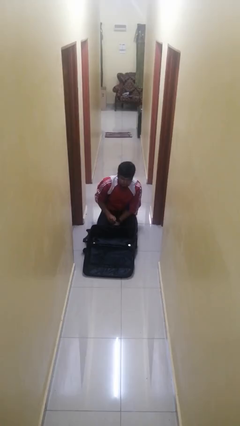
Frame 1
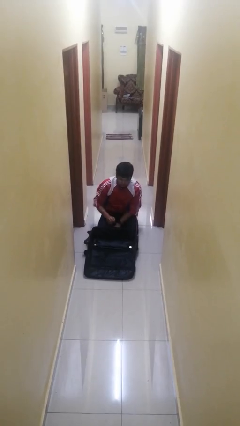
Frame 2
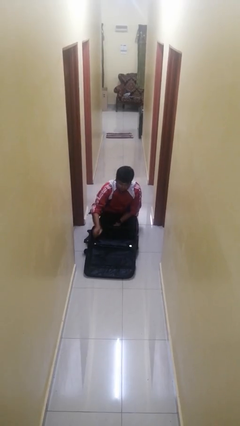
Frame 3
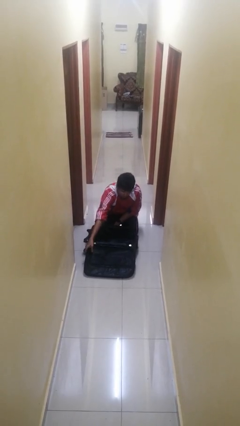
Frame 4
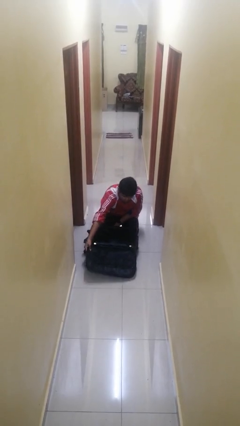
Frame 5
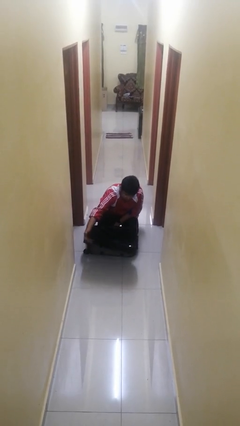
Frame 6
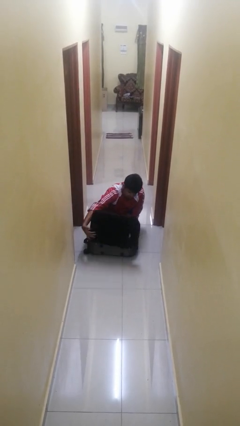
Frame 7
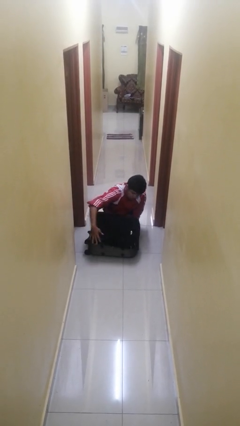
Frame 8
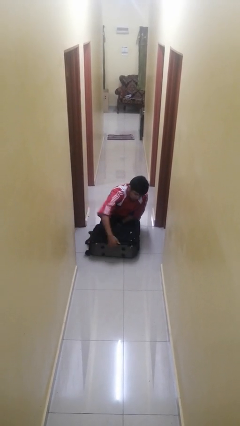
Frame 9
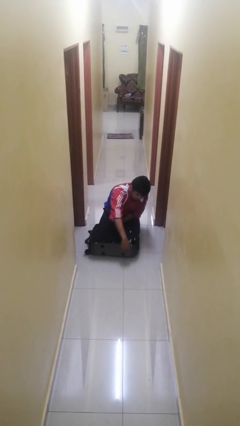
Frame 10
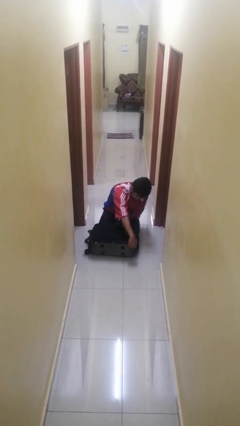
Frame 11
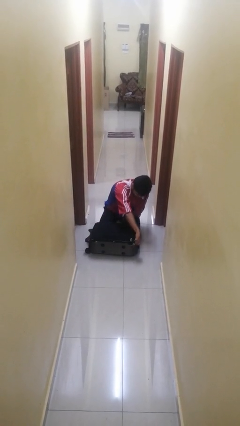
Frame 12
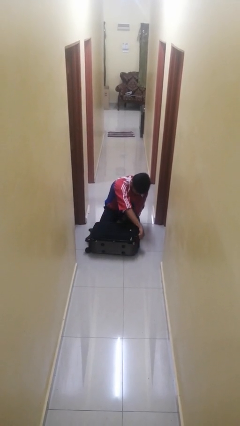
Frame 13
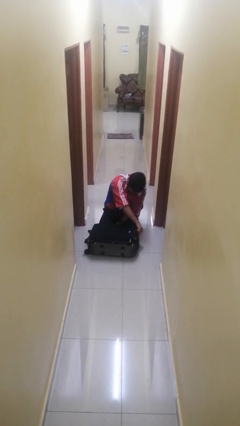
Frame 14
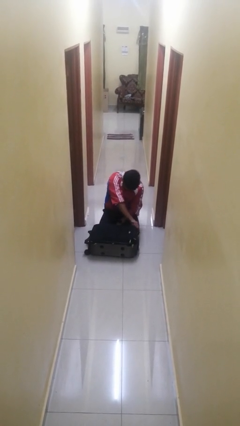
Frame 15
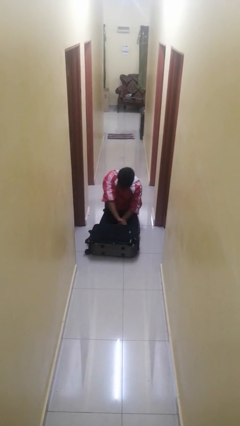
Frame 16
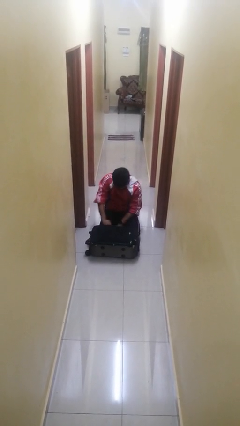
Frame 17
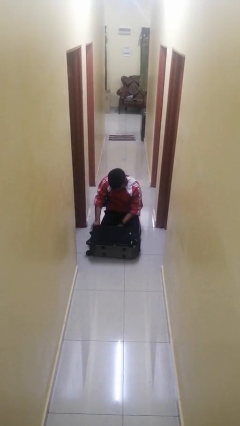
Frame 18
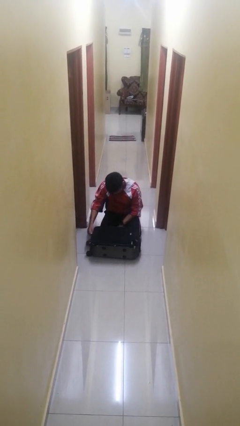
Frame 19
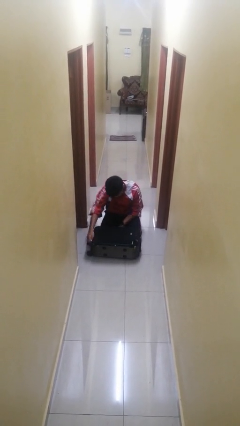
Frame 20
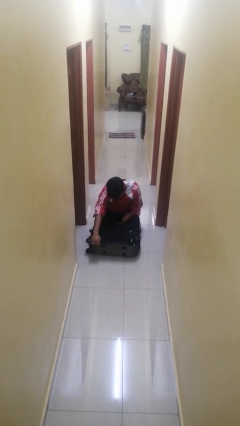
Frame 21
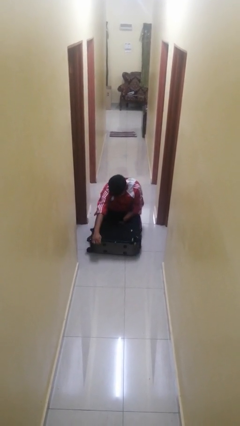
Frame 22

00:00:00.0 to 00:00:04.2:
person closes suitcase

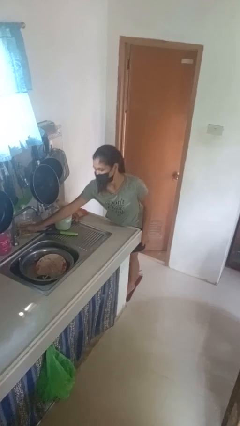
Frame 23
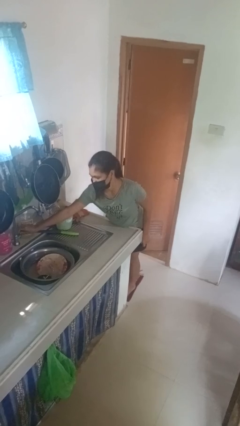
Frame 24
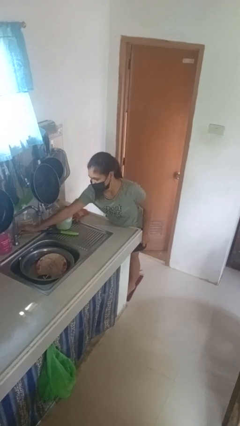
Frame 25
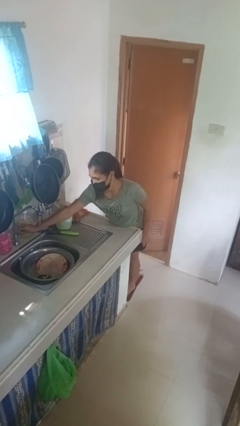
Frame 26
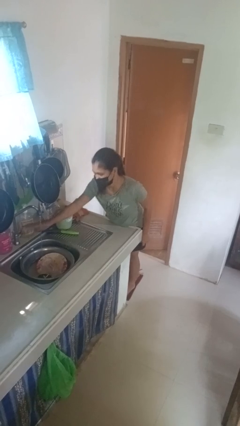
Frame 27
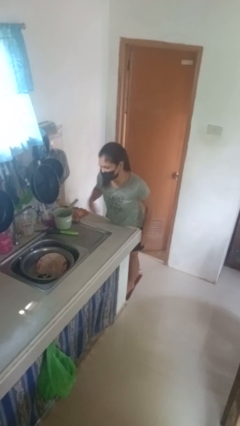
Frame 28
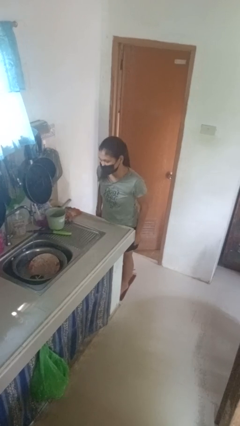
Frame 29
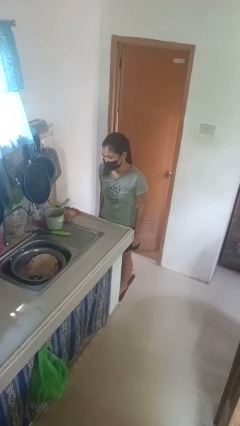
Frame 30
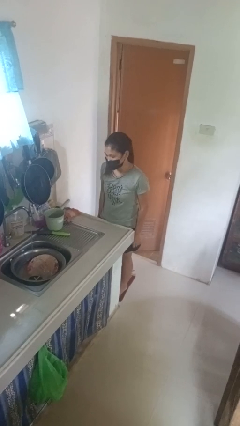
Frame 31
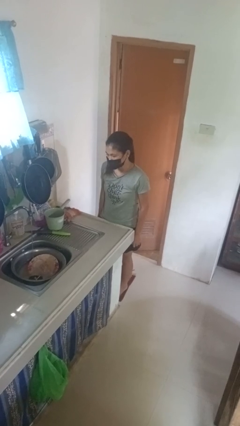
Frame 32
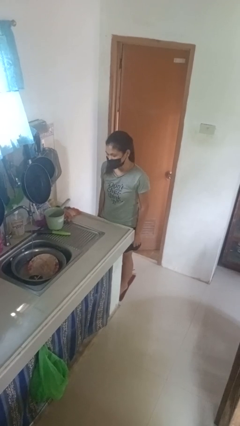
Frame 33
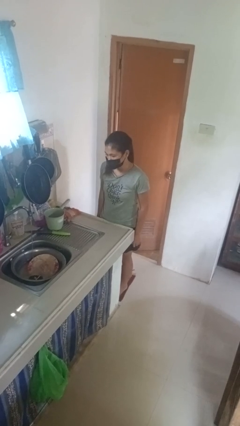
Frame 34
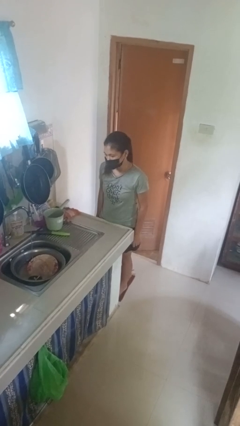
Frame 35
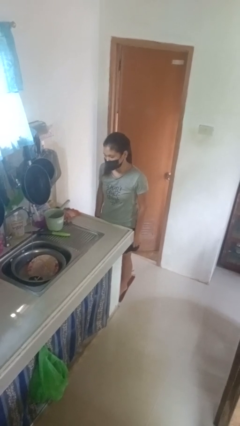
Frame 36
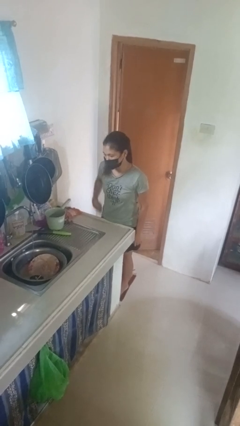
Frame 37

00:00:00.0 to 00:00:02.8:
person turns on faucet

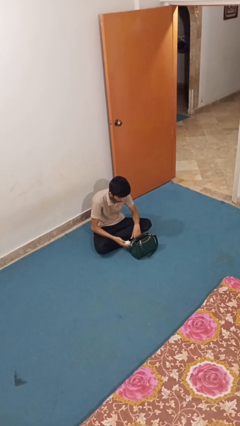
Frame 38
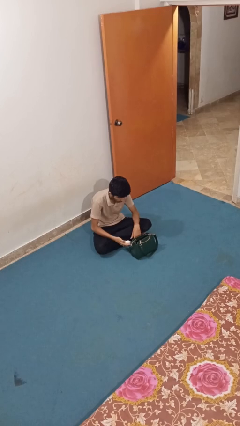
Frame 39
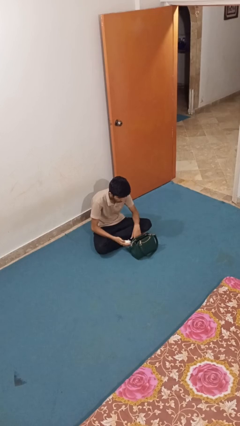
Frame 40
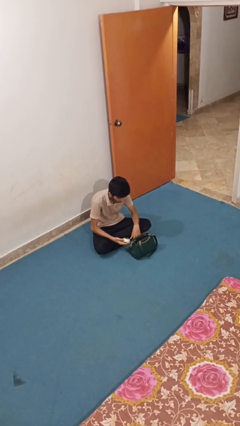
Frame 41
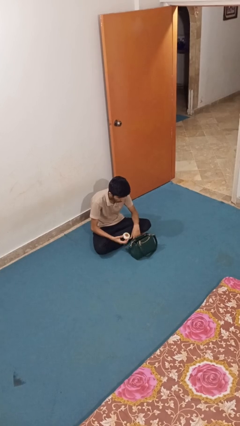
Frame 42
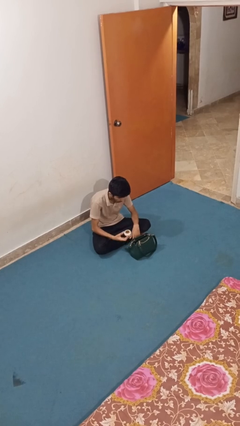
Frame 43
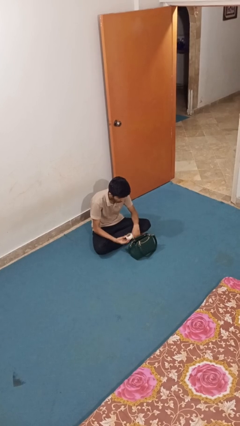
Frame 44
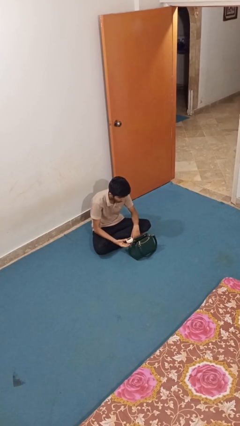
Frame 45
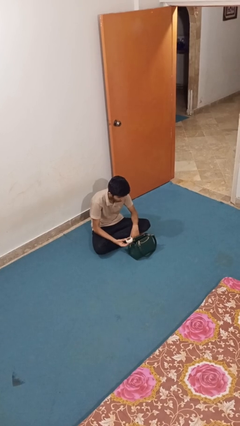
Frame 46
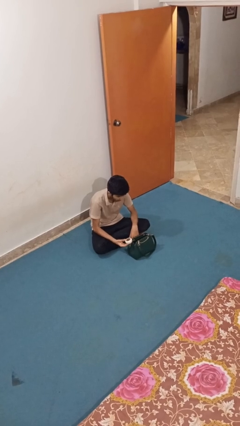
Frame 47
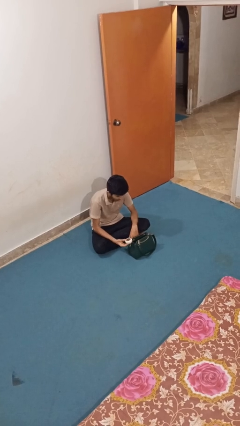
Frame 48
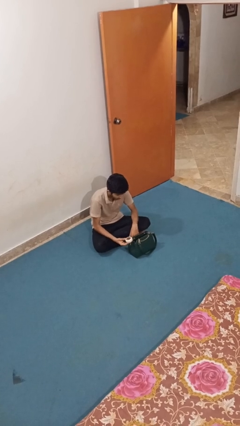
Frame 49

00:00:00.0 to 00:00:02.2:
person takes object from purse

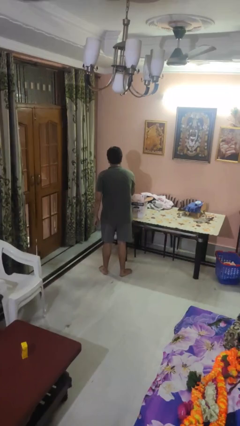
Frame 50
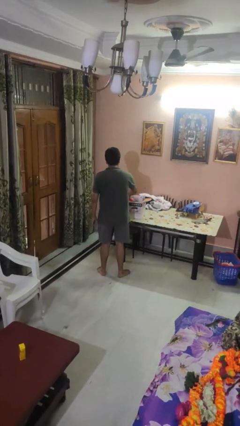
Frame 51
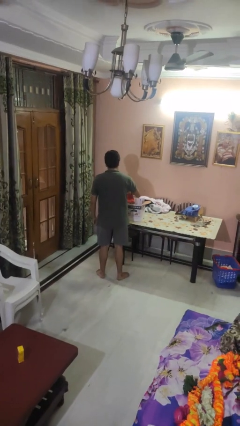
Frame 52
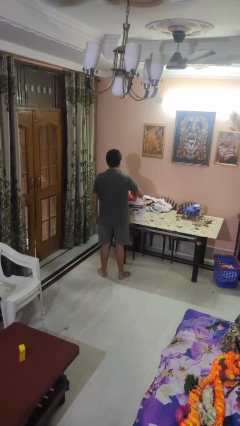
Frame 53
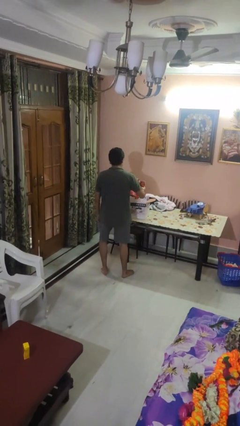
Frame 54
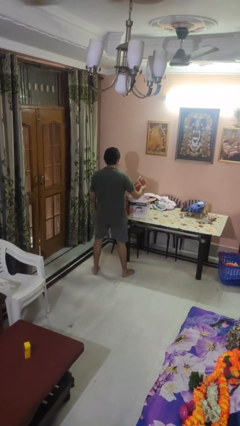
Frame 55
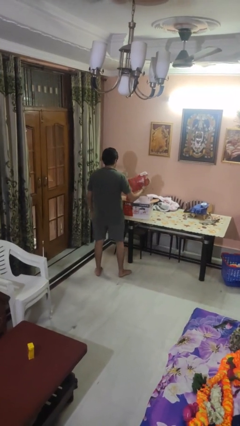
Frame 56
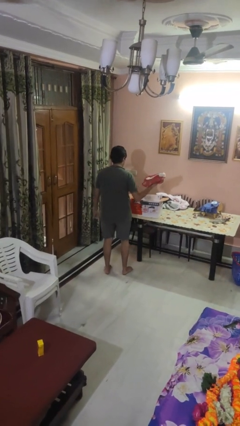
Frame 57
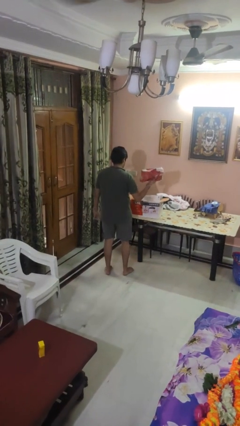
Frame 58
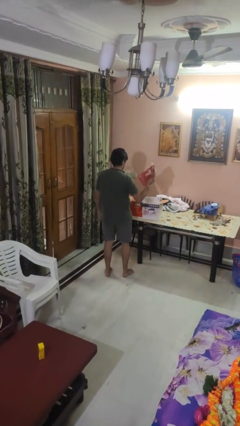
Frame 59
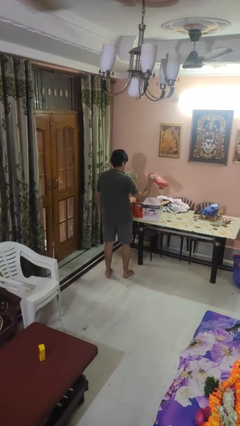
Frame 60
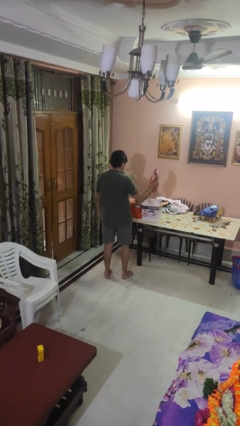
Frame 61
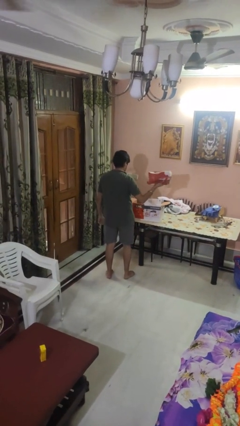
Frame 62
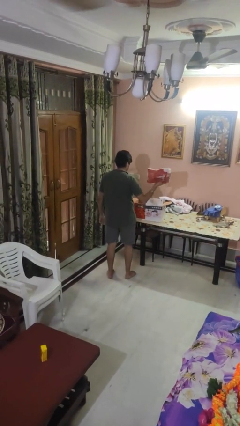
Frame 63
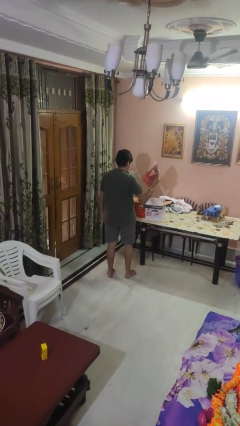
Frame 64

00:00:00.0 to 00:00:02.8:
person takes object from box

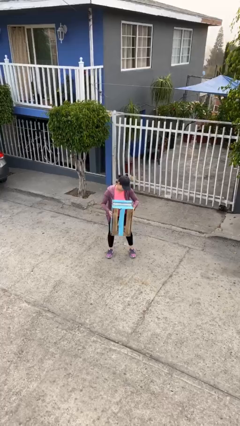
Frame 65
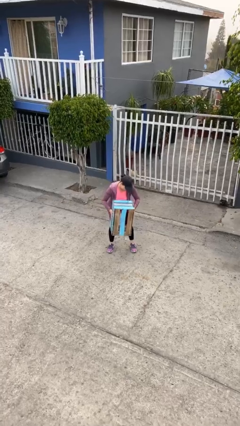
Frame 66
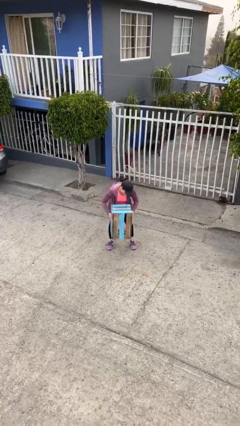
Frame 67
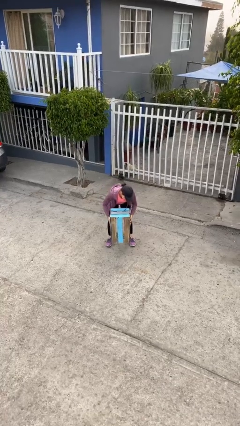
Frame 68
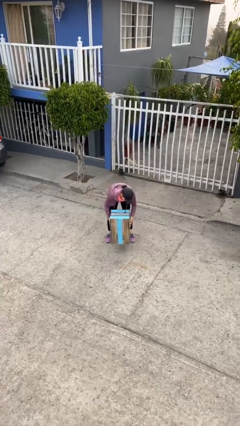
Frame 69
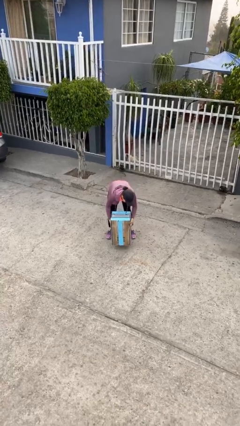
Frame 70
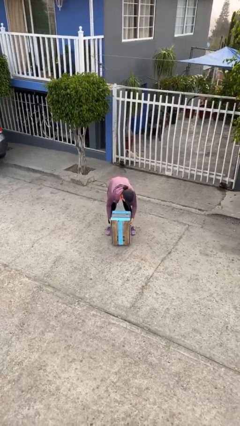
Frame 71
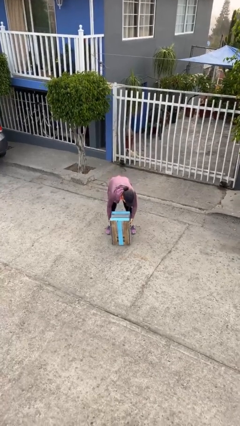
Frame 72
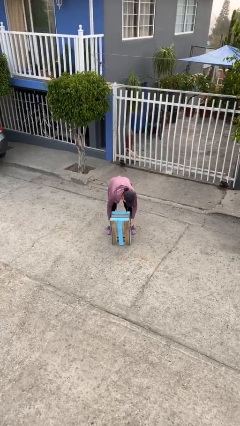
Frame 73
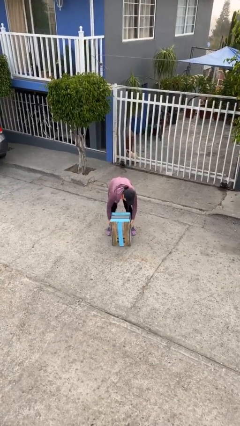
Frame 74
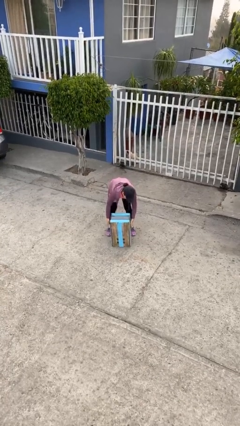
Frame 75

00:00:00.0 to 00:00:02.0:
person puts down object on floor

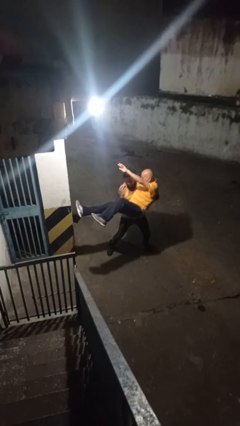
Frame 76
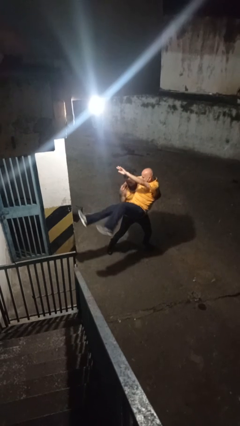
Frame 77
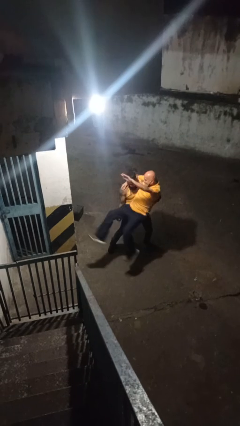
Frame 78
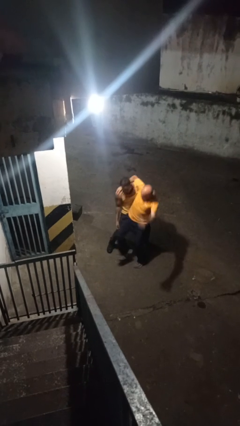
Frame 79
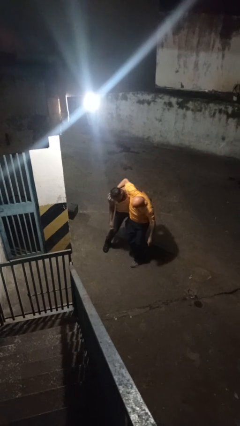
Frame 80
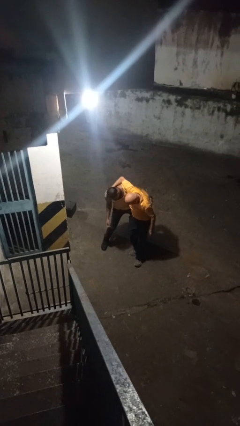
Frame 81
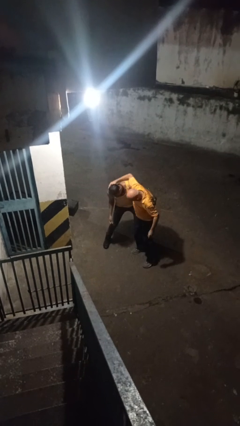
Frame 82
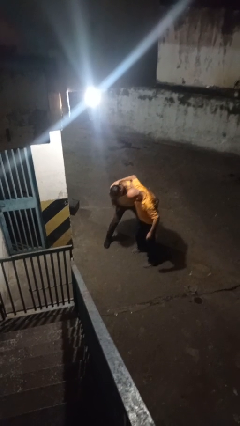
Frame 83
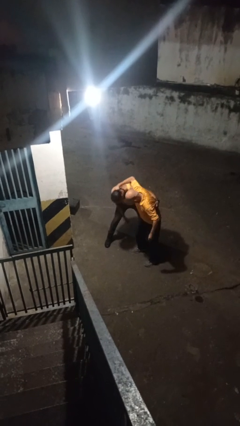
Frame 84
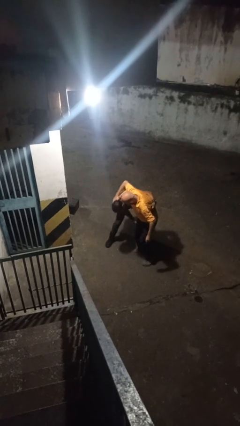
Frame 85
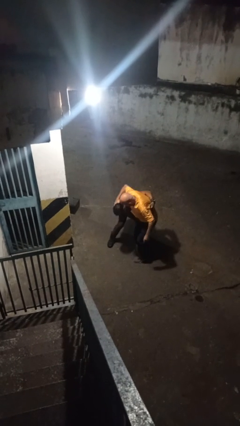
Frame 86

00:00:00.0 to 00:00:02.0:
person puts down person

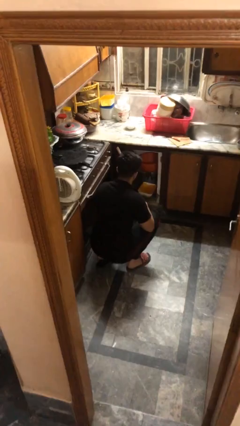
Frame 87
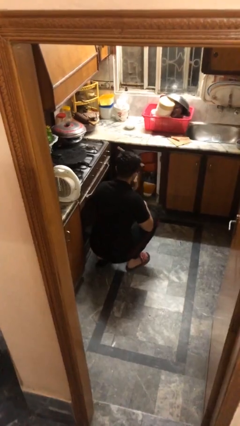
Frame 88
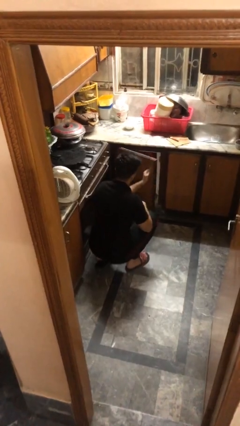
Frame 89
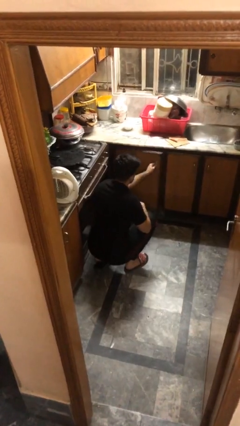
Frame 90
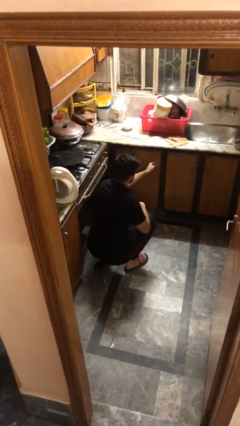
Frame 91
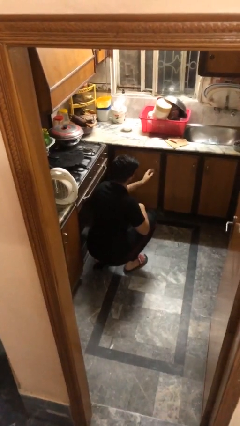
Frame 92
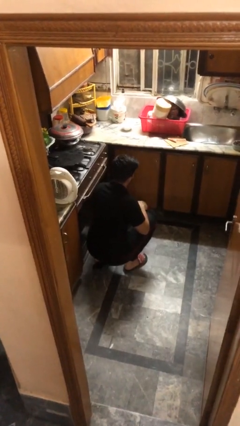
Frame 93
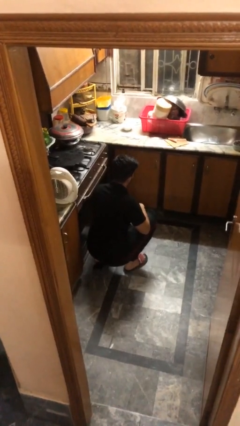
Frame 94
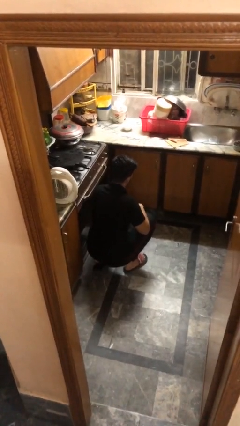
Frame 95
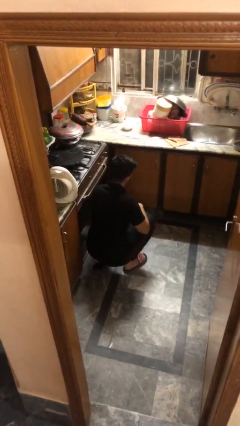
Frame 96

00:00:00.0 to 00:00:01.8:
person closes kitchen drawer
